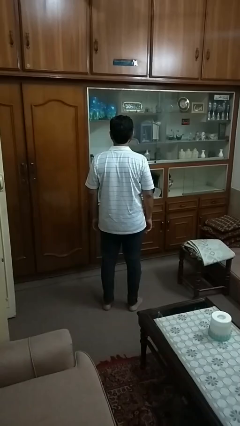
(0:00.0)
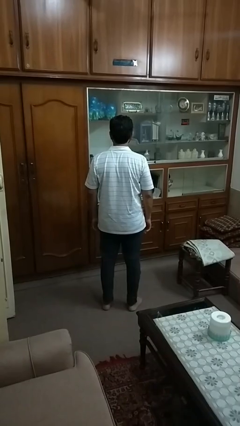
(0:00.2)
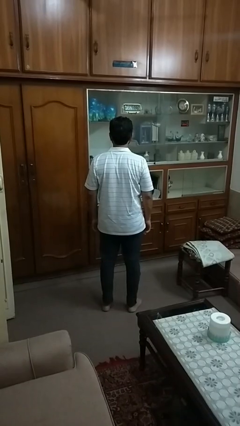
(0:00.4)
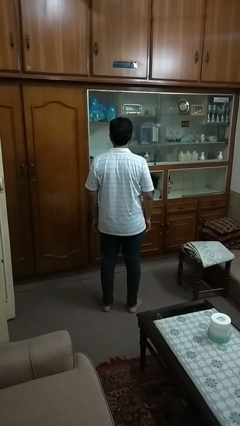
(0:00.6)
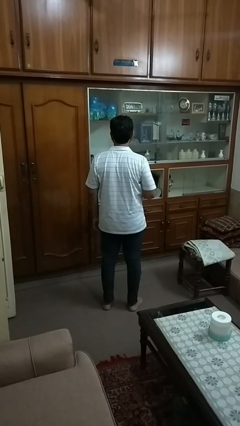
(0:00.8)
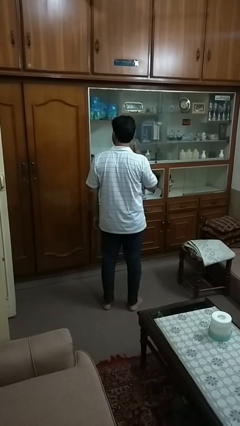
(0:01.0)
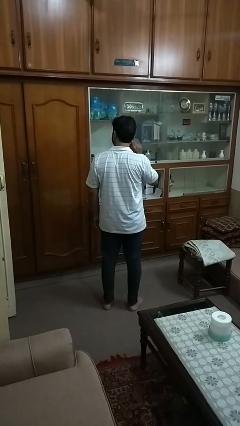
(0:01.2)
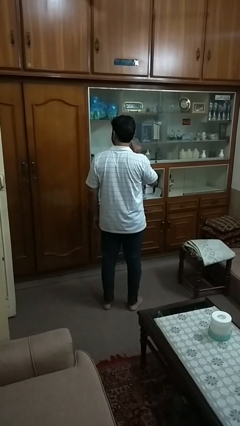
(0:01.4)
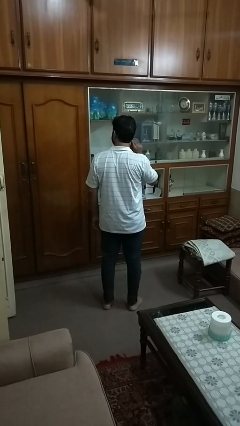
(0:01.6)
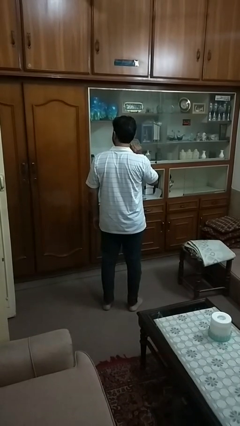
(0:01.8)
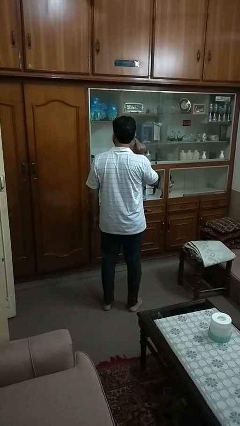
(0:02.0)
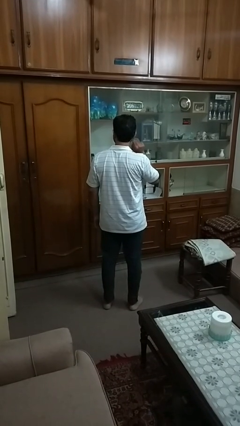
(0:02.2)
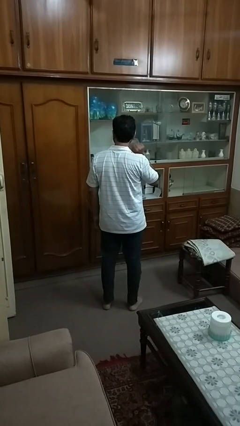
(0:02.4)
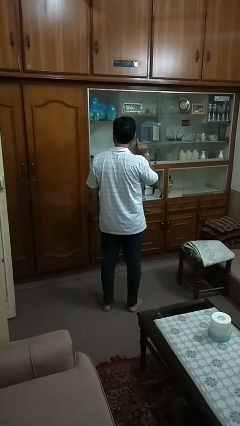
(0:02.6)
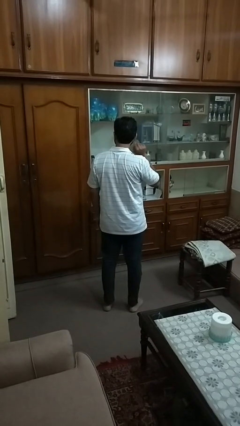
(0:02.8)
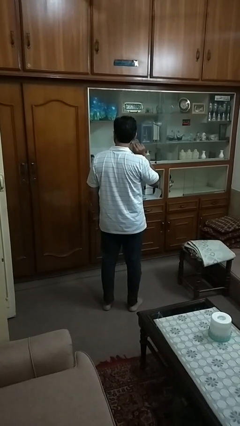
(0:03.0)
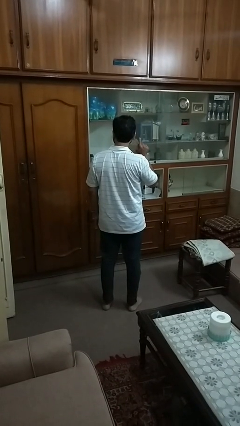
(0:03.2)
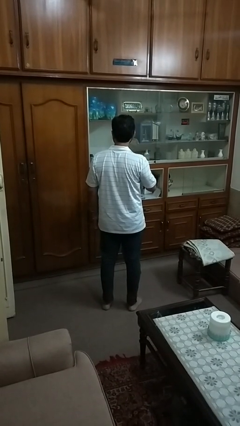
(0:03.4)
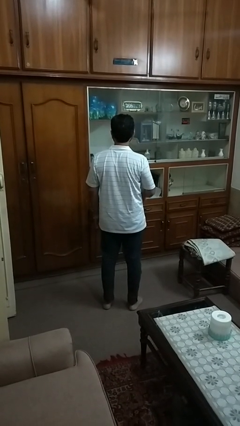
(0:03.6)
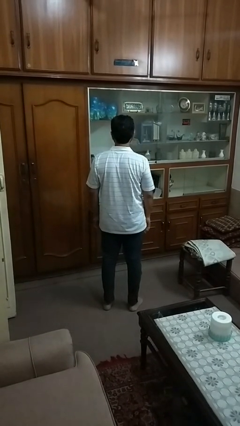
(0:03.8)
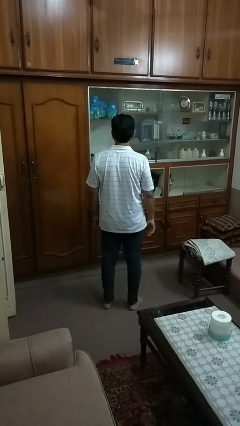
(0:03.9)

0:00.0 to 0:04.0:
person touches earlobe

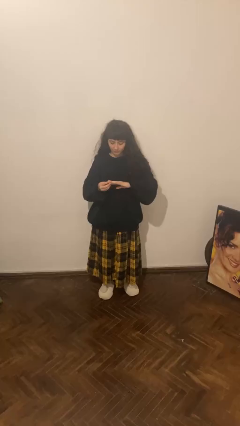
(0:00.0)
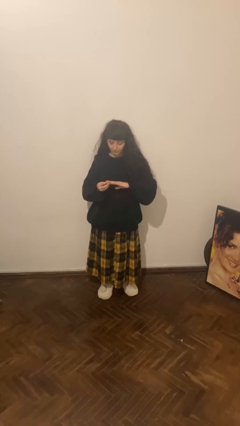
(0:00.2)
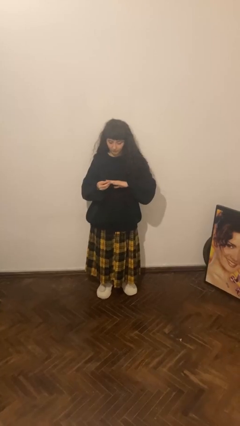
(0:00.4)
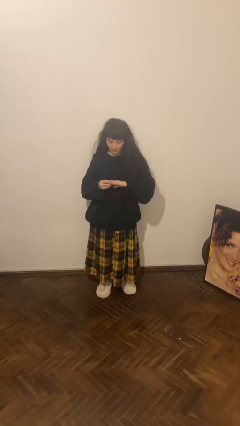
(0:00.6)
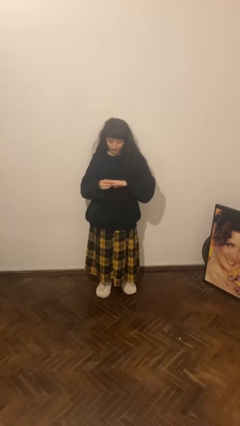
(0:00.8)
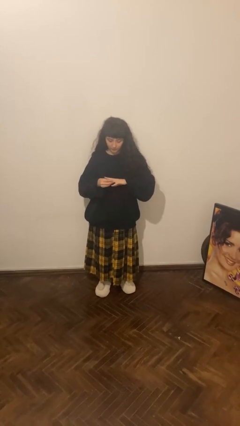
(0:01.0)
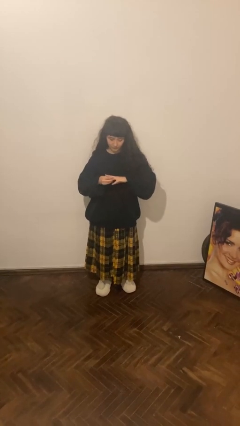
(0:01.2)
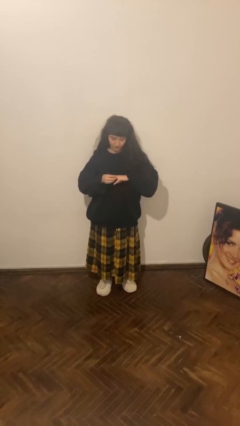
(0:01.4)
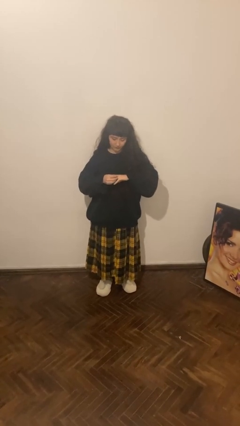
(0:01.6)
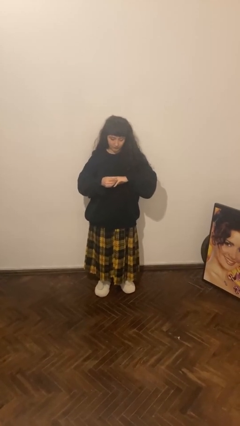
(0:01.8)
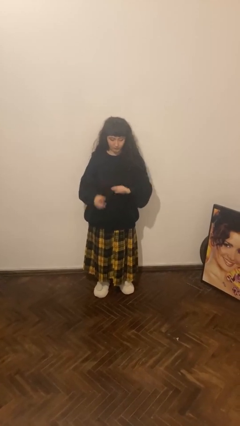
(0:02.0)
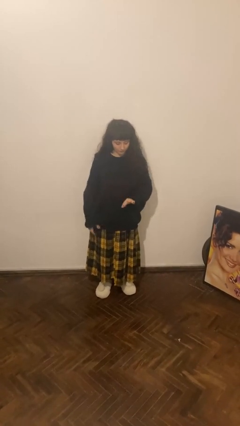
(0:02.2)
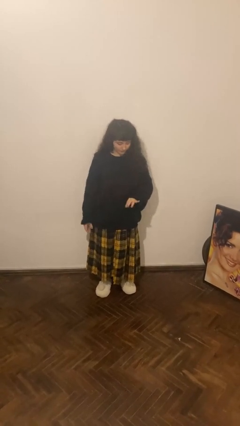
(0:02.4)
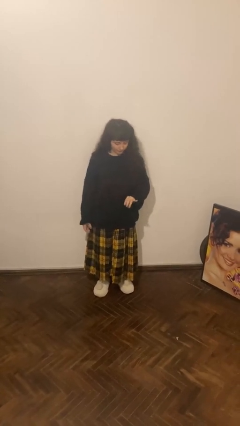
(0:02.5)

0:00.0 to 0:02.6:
person puts on ring

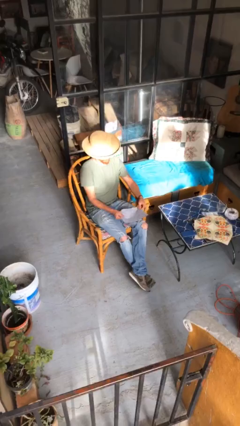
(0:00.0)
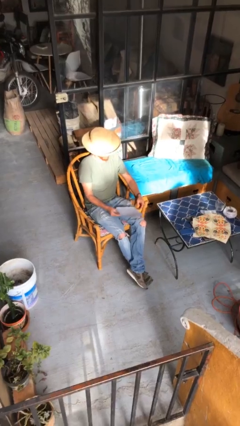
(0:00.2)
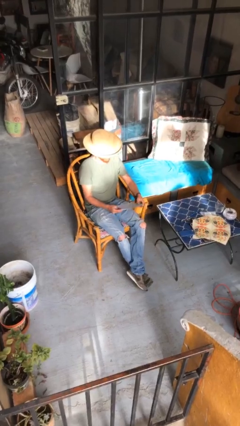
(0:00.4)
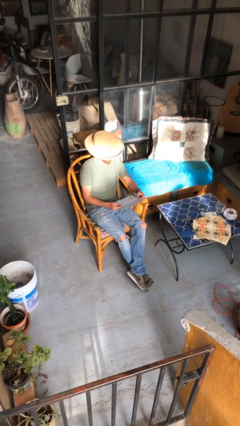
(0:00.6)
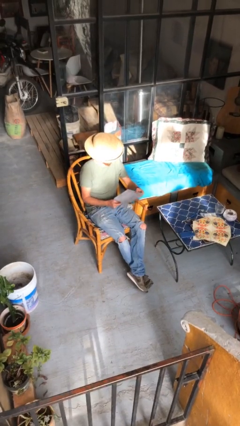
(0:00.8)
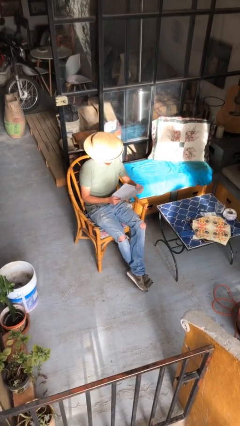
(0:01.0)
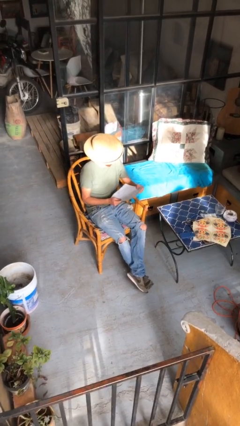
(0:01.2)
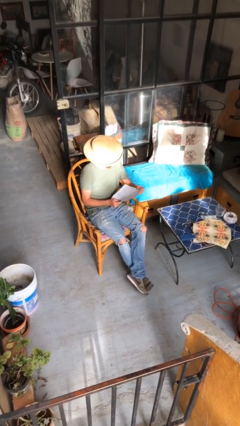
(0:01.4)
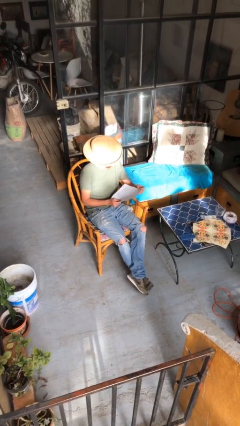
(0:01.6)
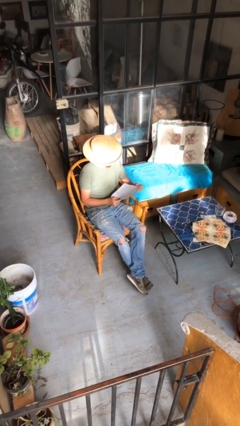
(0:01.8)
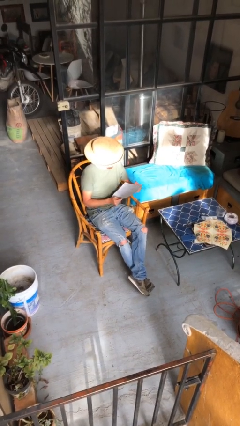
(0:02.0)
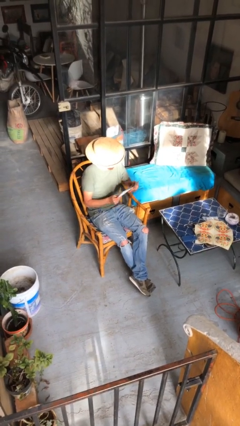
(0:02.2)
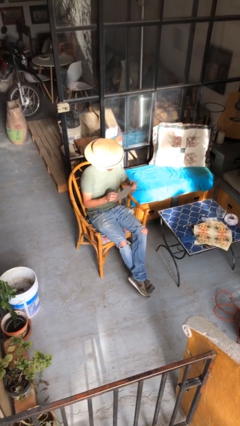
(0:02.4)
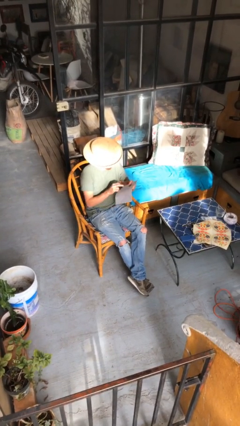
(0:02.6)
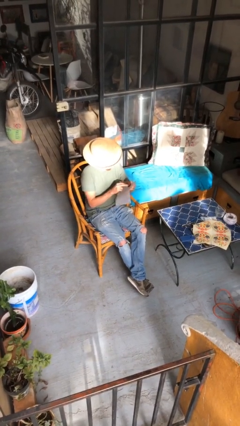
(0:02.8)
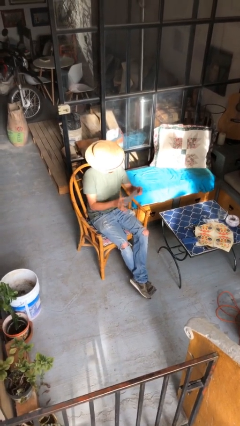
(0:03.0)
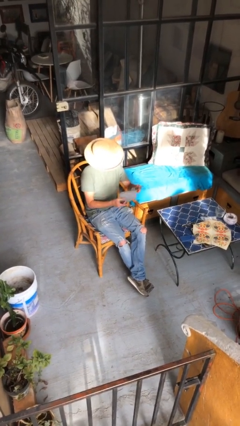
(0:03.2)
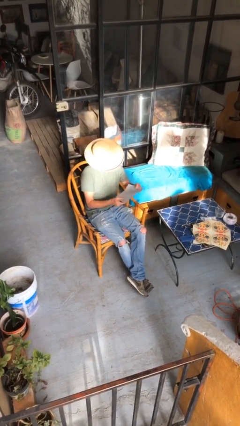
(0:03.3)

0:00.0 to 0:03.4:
person reads document

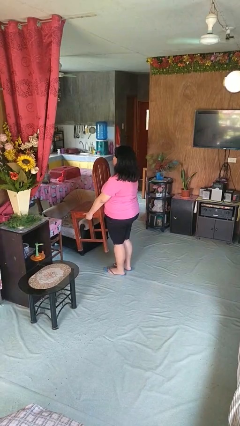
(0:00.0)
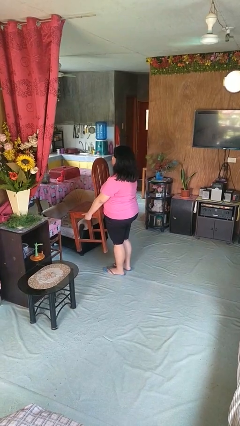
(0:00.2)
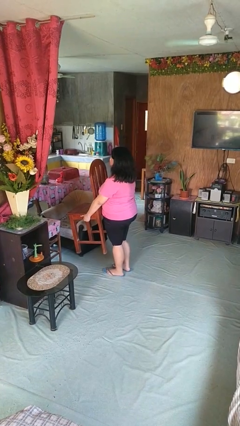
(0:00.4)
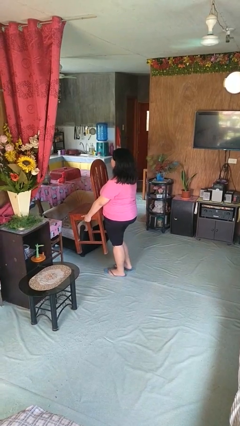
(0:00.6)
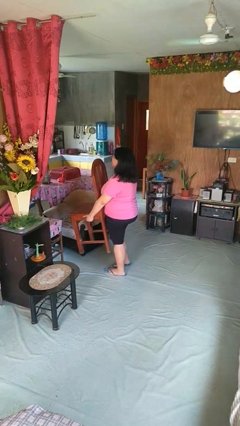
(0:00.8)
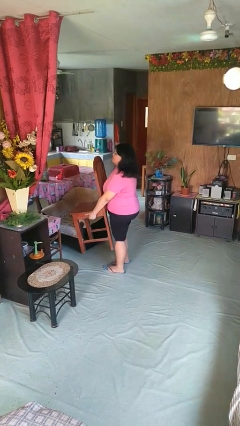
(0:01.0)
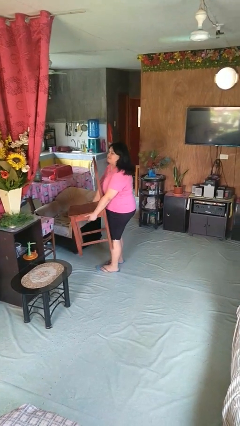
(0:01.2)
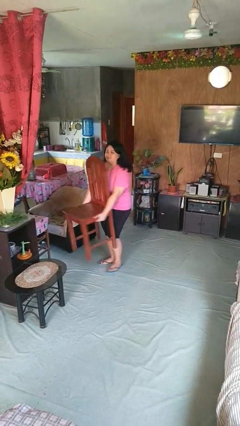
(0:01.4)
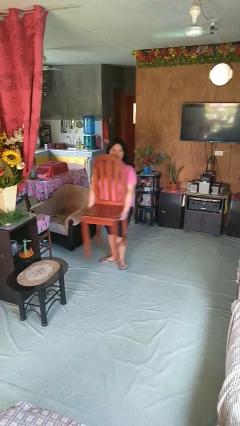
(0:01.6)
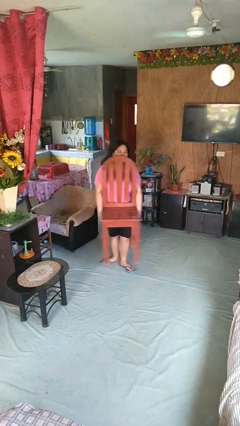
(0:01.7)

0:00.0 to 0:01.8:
person carries furniture

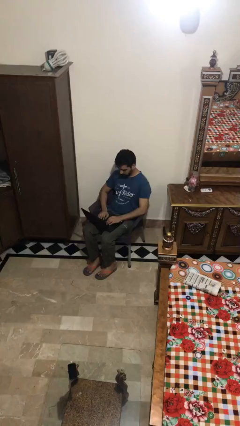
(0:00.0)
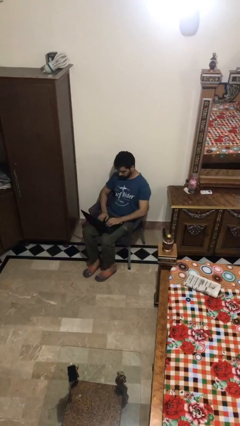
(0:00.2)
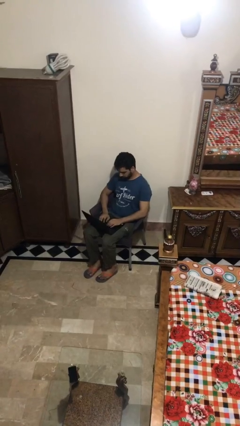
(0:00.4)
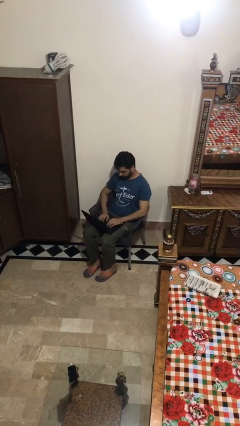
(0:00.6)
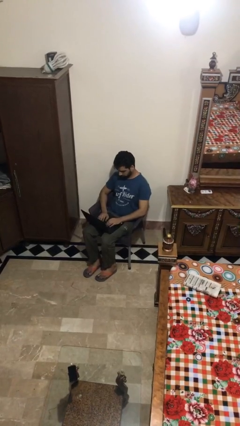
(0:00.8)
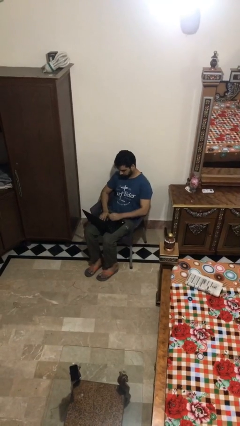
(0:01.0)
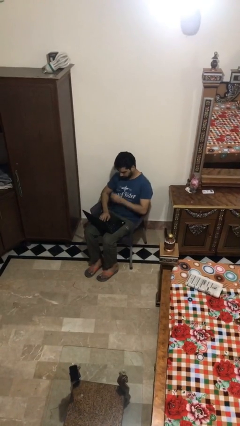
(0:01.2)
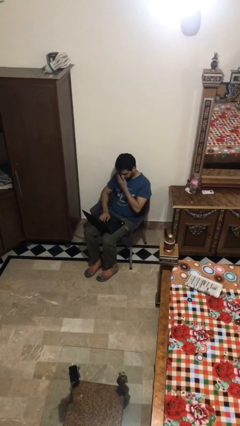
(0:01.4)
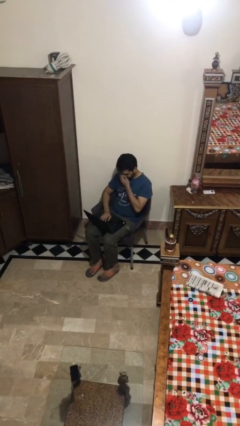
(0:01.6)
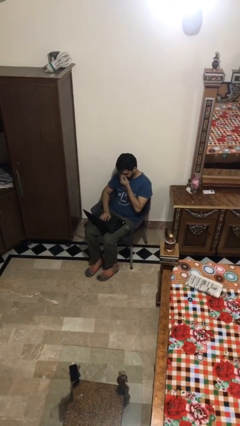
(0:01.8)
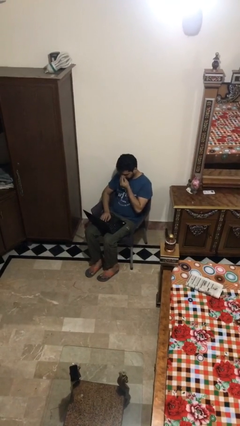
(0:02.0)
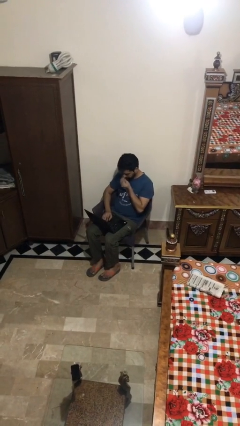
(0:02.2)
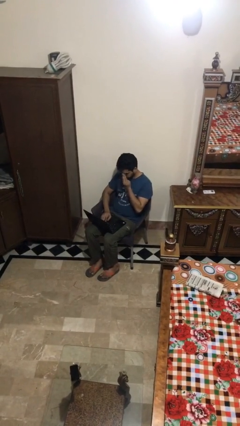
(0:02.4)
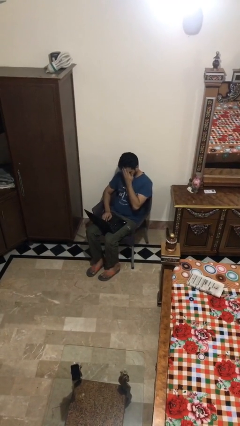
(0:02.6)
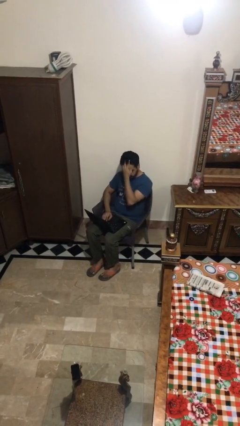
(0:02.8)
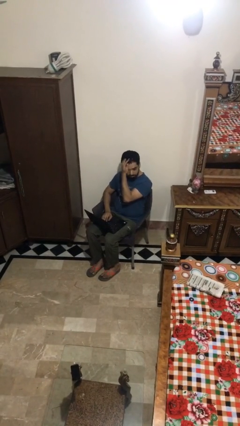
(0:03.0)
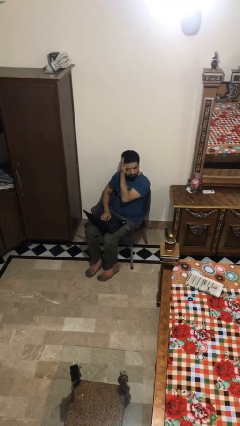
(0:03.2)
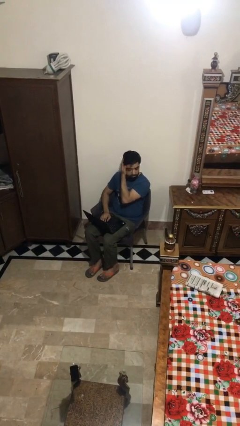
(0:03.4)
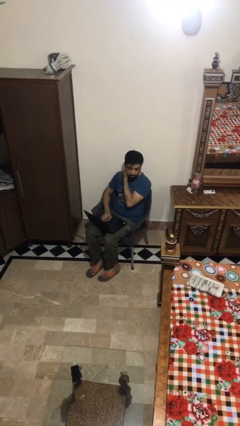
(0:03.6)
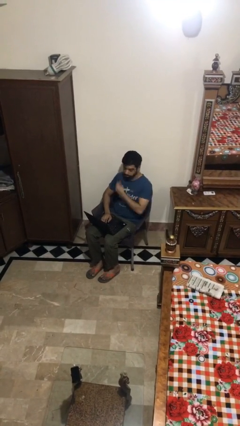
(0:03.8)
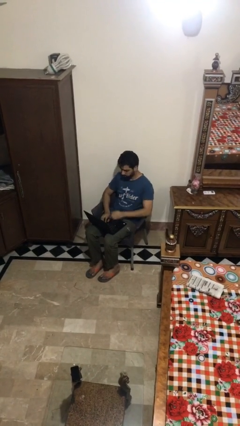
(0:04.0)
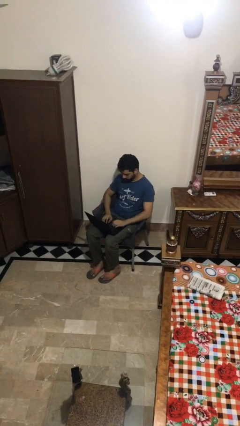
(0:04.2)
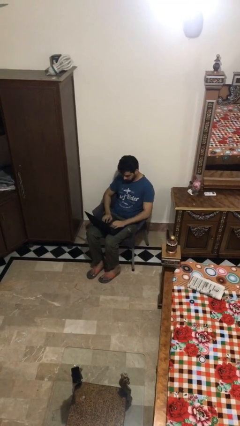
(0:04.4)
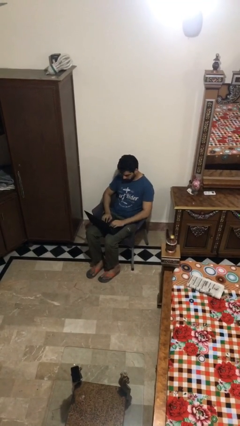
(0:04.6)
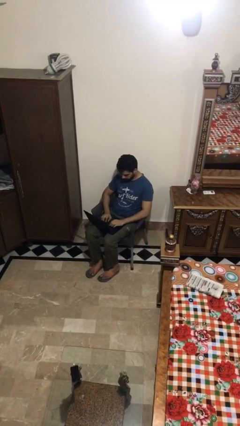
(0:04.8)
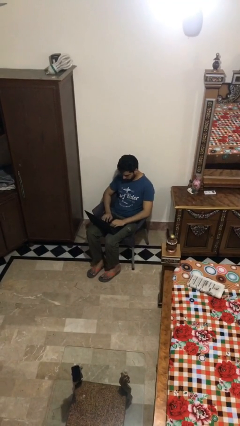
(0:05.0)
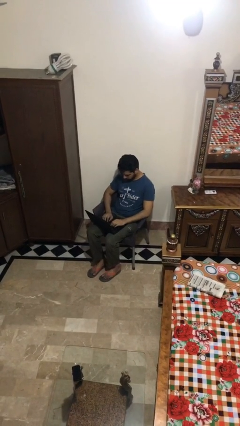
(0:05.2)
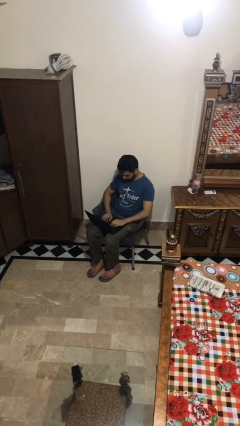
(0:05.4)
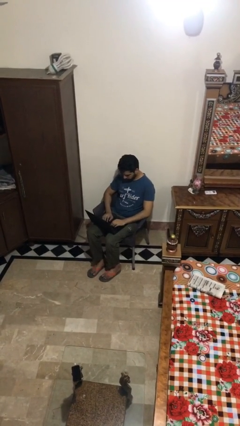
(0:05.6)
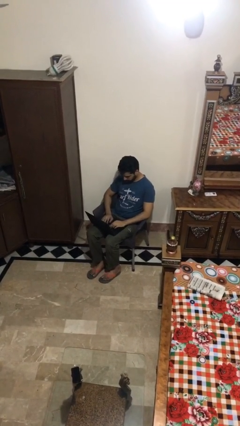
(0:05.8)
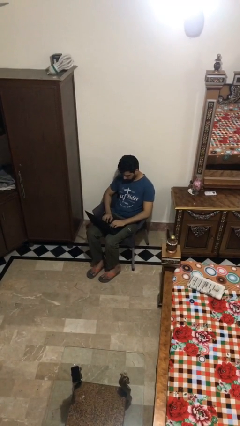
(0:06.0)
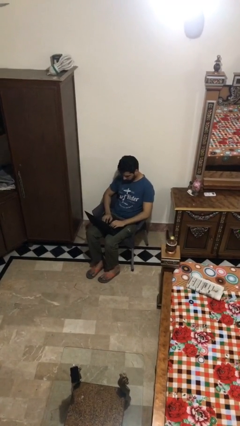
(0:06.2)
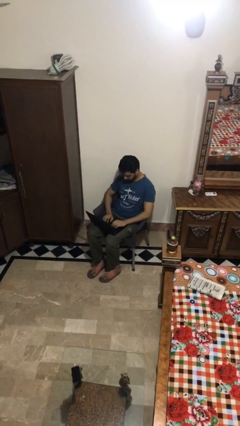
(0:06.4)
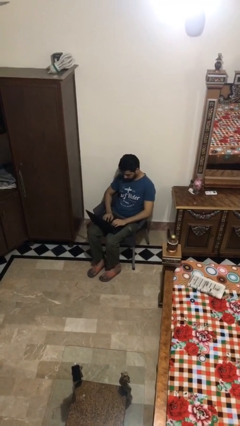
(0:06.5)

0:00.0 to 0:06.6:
person interacts with laptop
